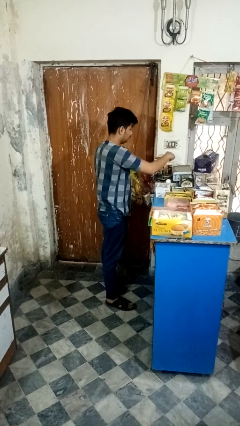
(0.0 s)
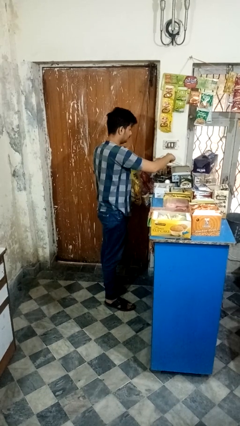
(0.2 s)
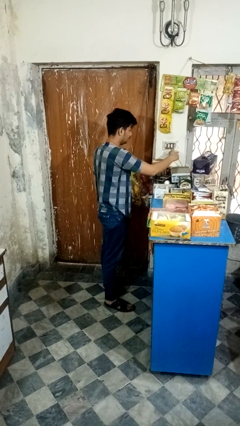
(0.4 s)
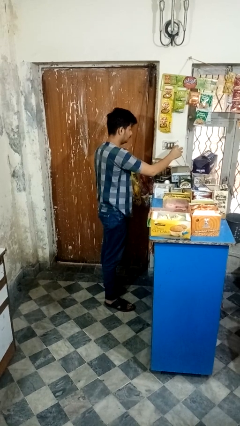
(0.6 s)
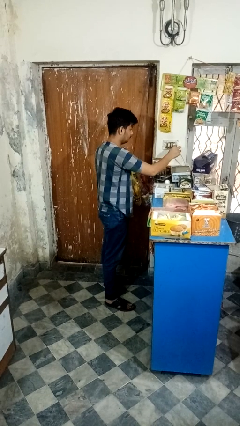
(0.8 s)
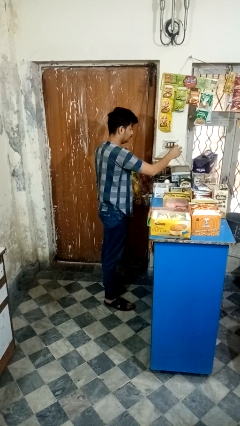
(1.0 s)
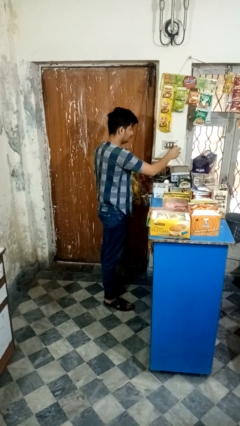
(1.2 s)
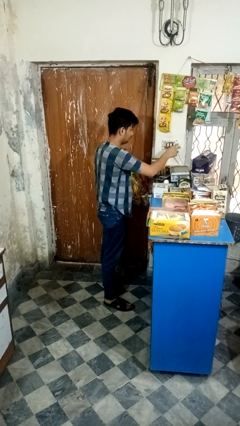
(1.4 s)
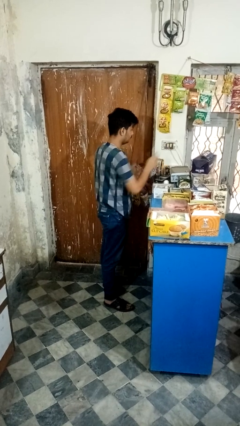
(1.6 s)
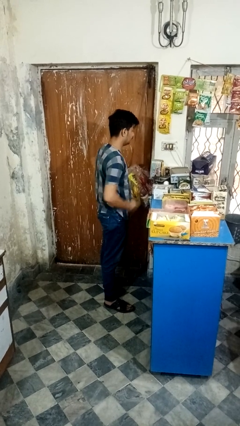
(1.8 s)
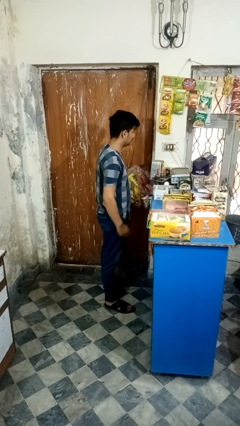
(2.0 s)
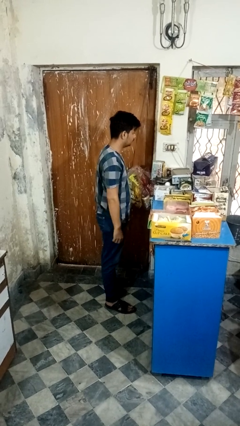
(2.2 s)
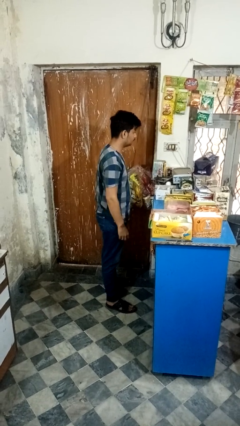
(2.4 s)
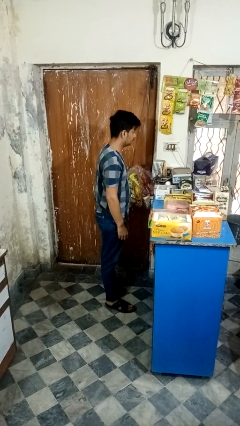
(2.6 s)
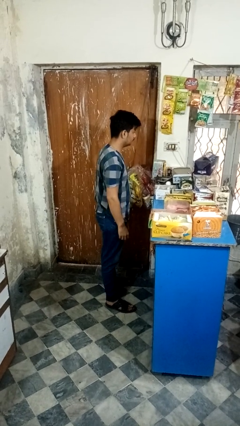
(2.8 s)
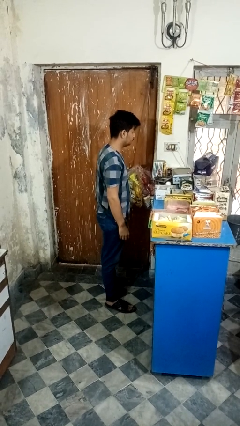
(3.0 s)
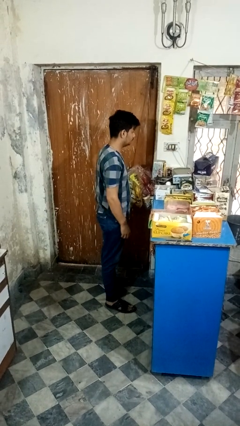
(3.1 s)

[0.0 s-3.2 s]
person plugs into electrical socket

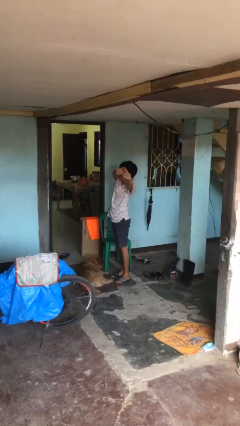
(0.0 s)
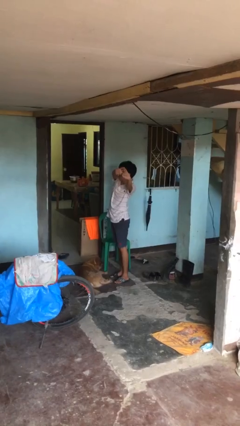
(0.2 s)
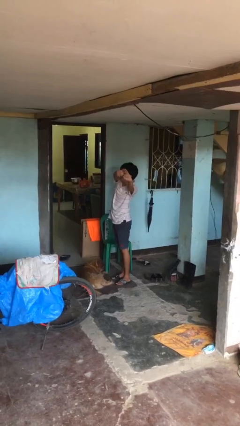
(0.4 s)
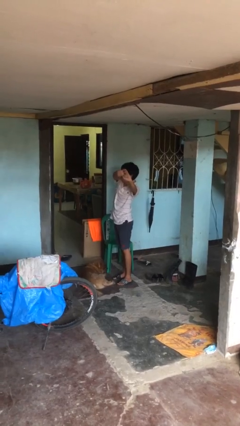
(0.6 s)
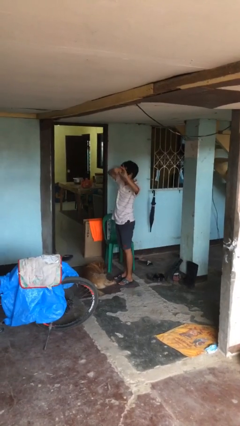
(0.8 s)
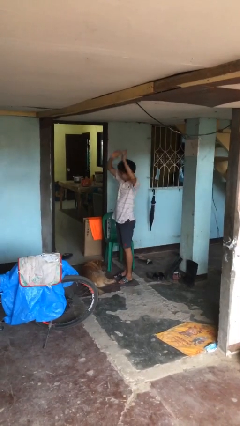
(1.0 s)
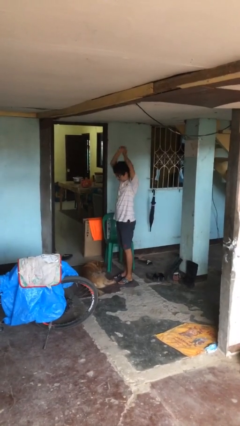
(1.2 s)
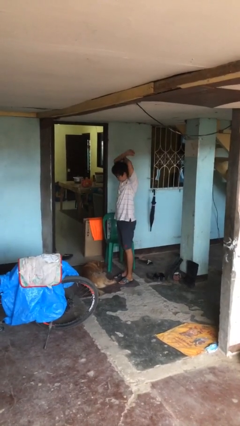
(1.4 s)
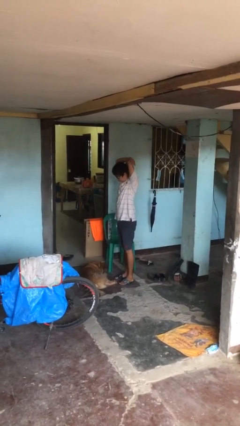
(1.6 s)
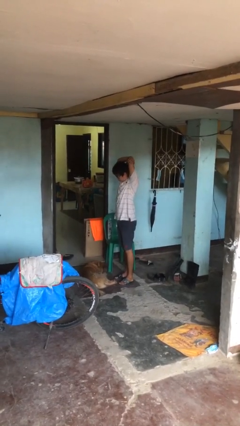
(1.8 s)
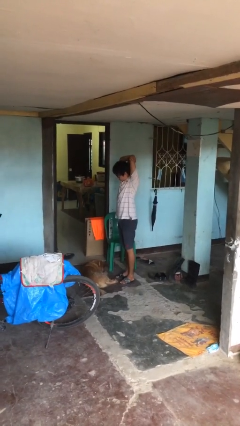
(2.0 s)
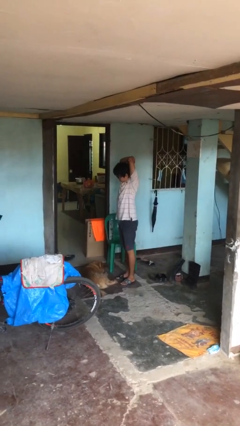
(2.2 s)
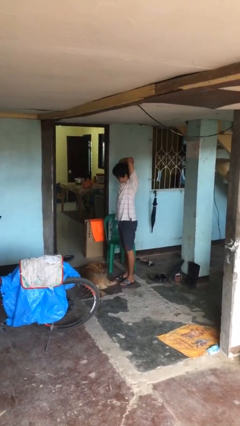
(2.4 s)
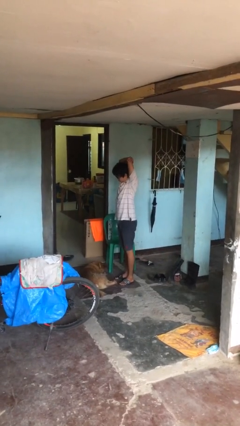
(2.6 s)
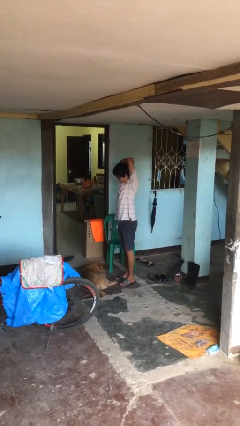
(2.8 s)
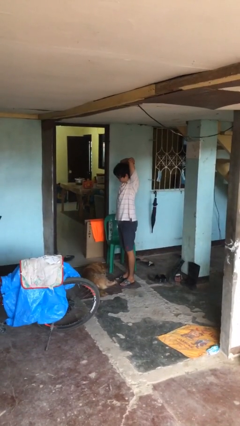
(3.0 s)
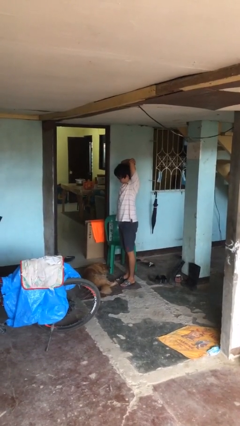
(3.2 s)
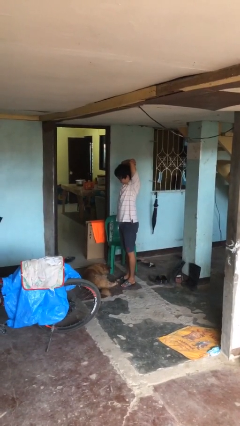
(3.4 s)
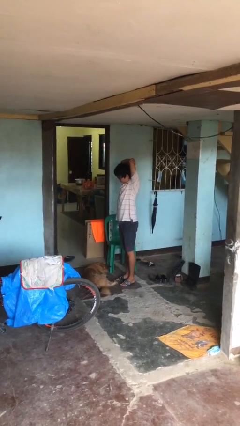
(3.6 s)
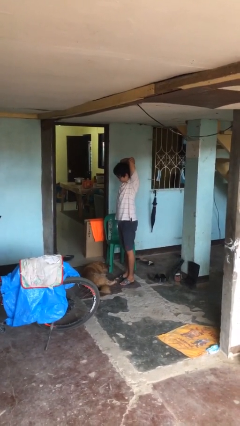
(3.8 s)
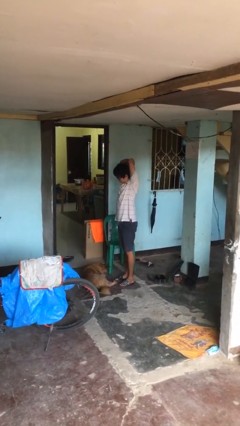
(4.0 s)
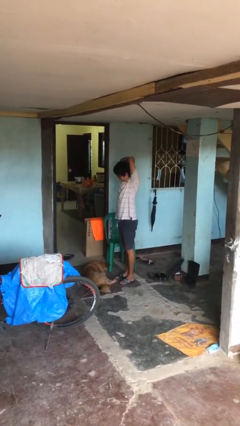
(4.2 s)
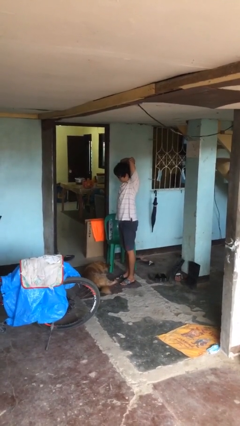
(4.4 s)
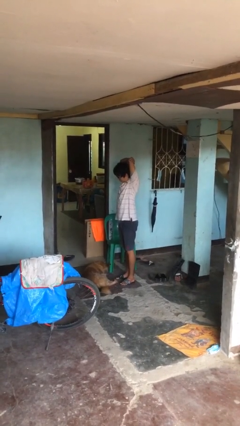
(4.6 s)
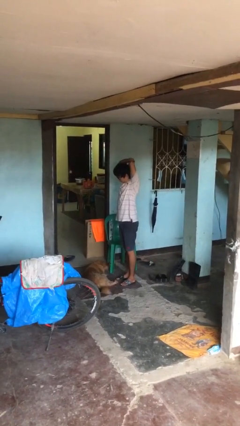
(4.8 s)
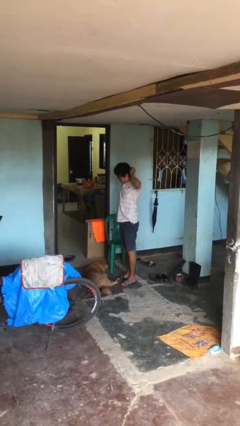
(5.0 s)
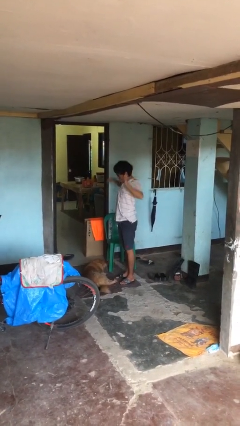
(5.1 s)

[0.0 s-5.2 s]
person stretches arms over head

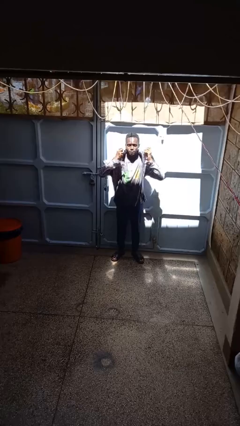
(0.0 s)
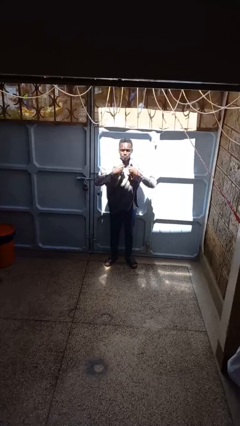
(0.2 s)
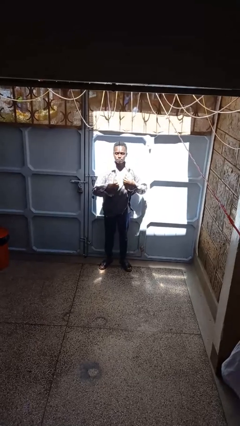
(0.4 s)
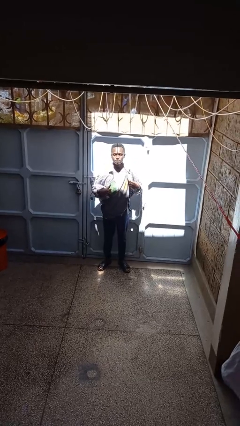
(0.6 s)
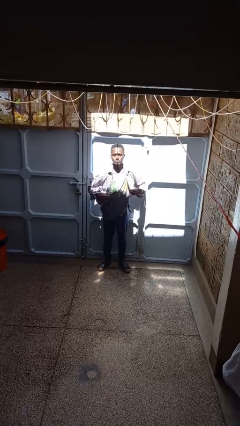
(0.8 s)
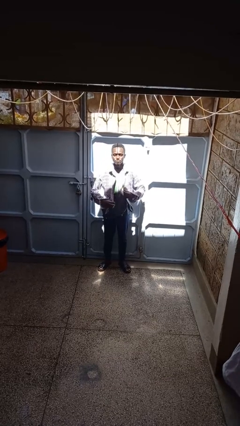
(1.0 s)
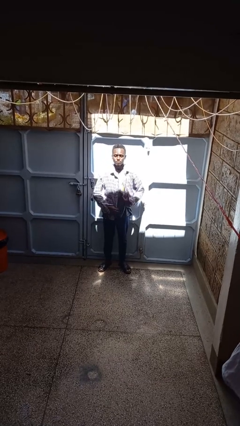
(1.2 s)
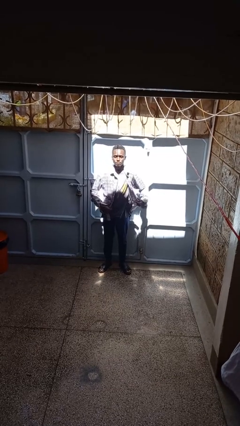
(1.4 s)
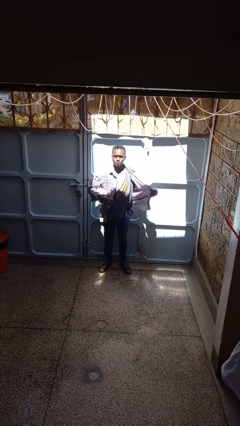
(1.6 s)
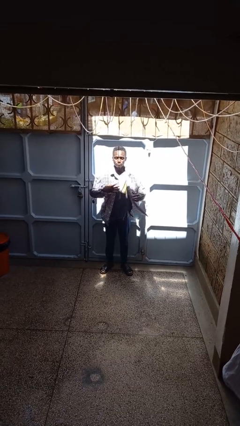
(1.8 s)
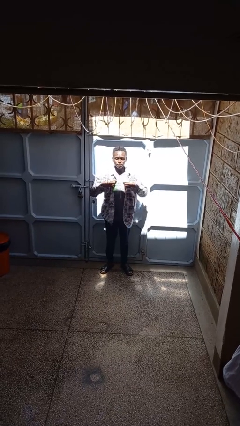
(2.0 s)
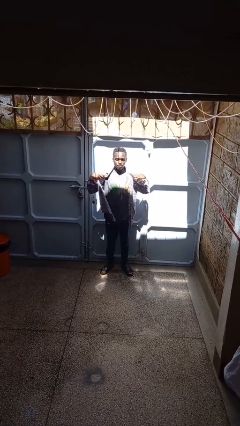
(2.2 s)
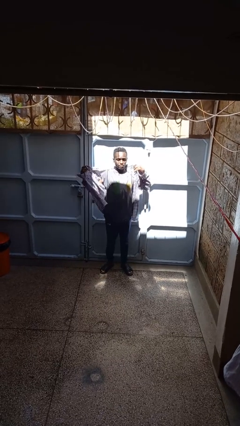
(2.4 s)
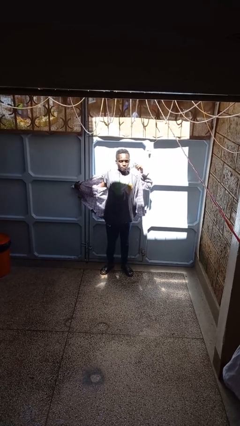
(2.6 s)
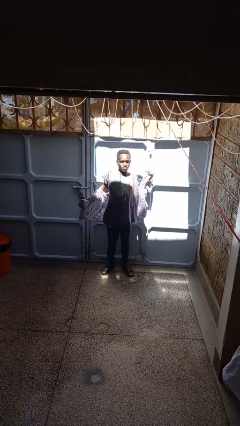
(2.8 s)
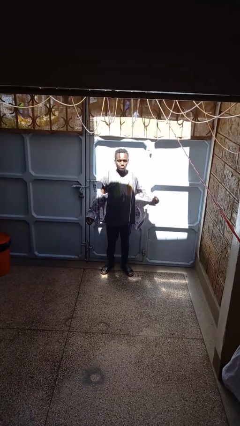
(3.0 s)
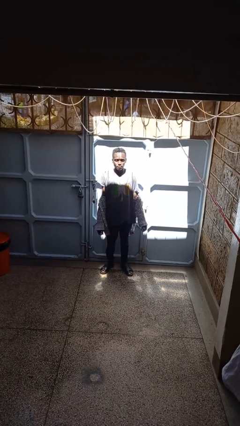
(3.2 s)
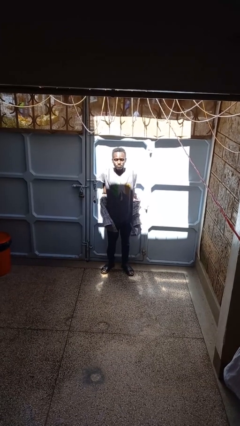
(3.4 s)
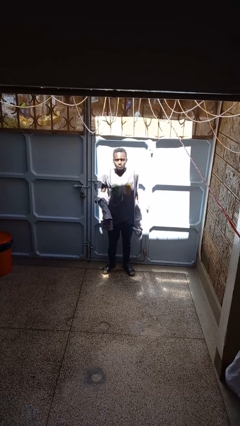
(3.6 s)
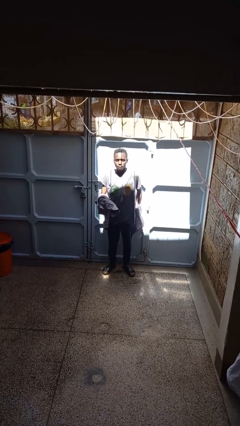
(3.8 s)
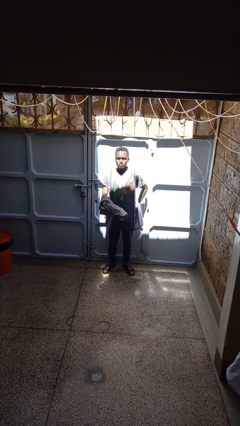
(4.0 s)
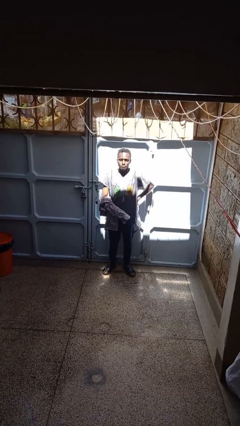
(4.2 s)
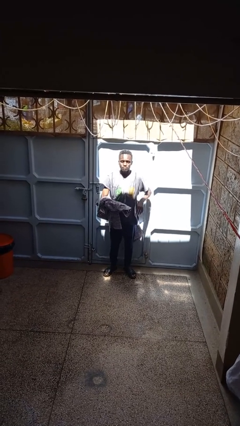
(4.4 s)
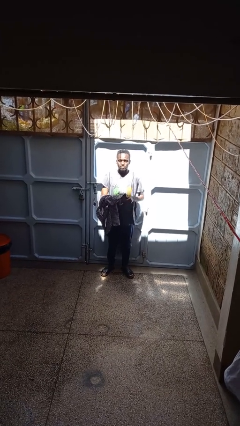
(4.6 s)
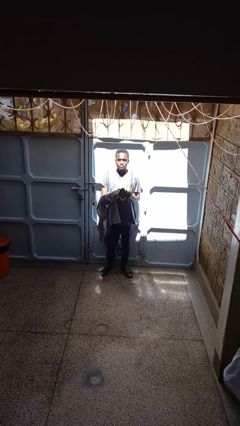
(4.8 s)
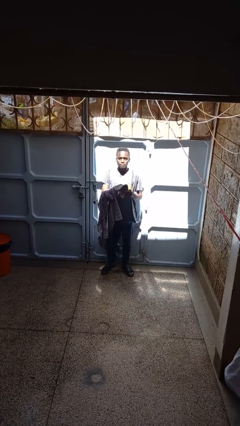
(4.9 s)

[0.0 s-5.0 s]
person takes off shirt

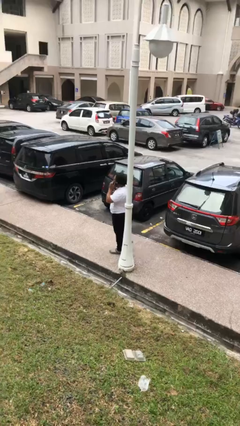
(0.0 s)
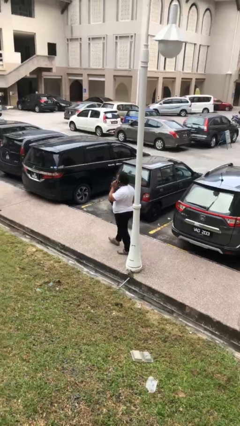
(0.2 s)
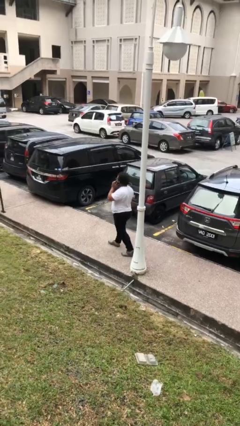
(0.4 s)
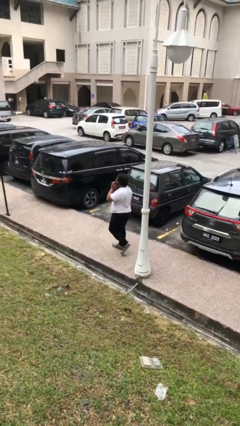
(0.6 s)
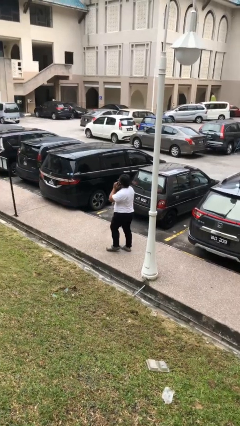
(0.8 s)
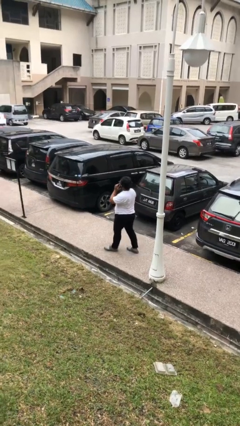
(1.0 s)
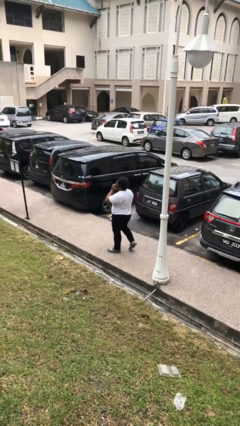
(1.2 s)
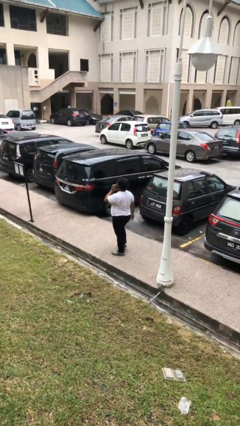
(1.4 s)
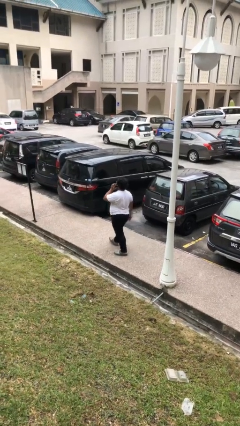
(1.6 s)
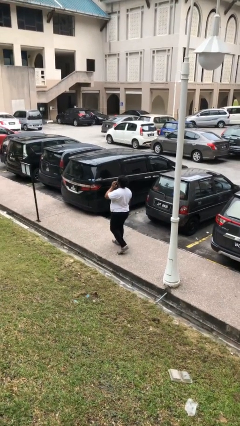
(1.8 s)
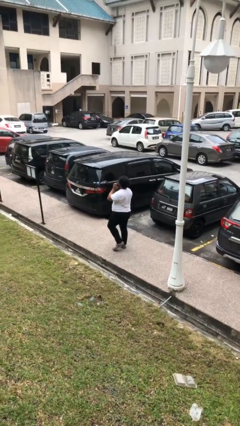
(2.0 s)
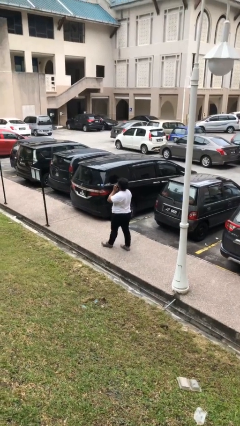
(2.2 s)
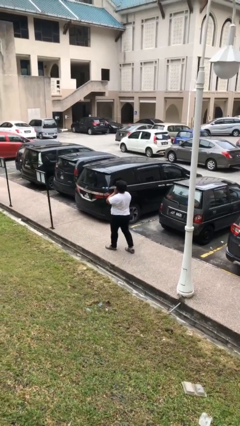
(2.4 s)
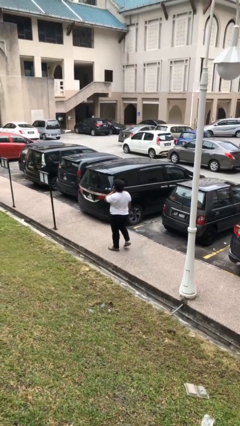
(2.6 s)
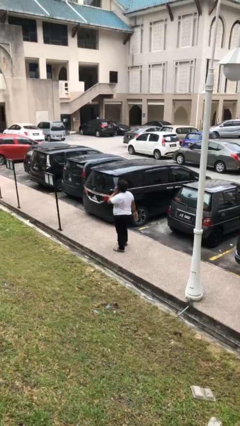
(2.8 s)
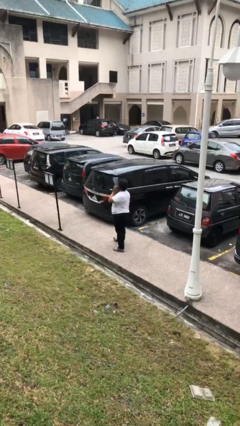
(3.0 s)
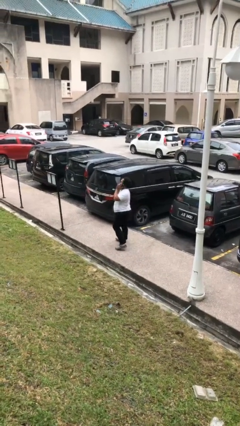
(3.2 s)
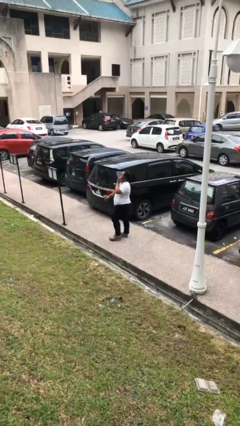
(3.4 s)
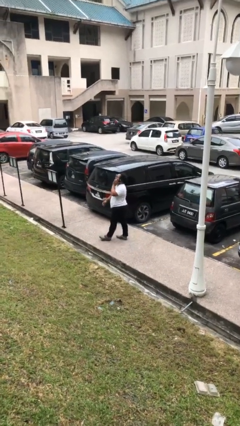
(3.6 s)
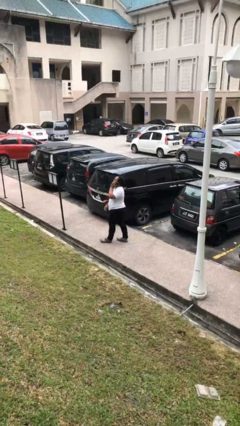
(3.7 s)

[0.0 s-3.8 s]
person talks on phone

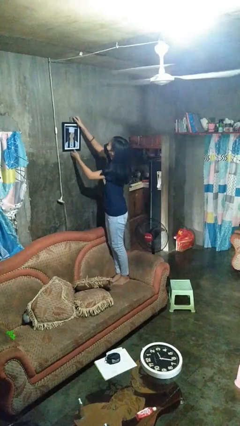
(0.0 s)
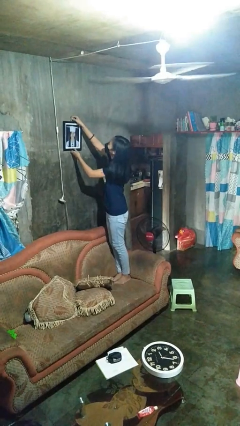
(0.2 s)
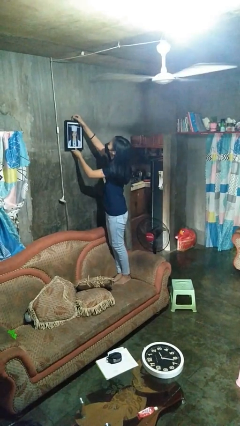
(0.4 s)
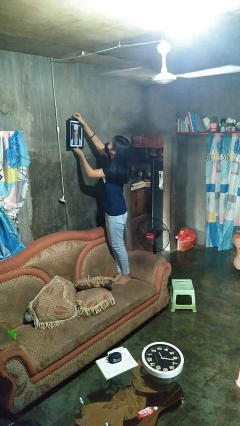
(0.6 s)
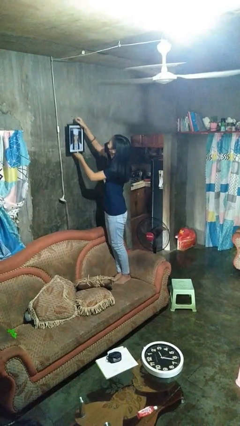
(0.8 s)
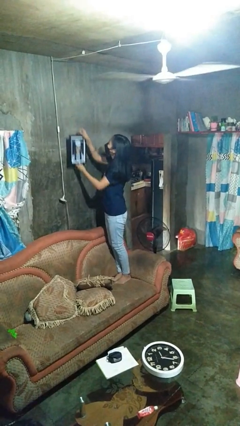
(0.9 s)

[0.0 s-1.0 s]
person takes down picture frame
